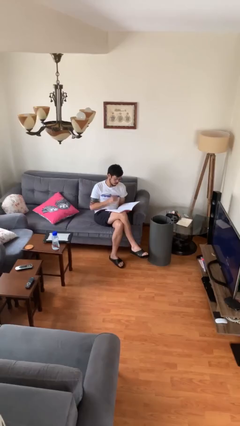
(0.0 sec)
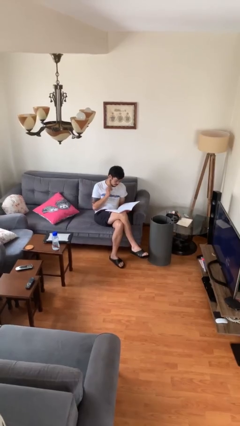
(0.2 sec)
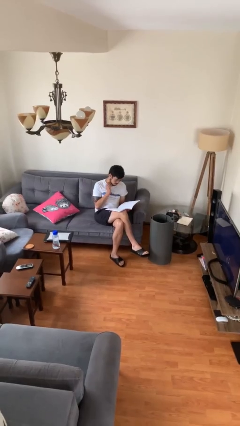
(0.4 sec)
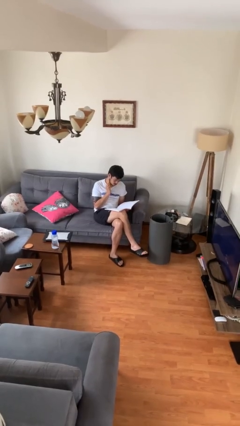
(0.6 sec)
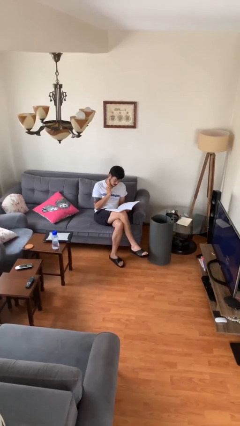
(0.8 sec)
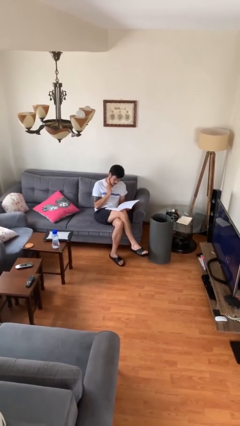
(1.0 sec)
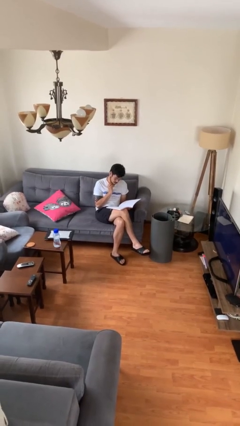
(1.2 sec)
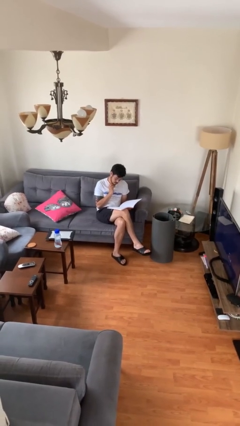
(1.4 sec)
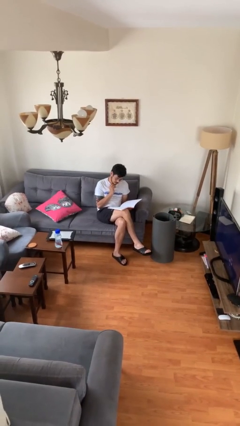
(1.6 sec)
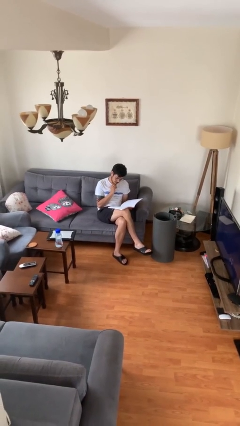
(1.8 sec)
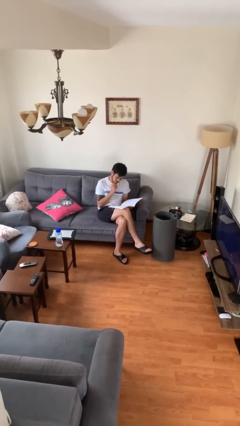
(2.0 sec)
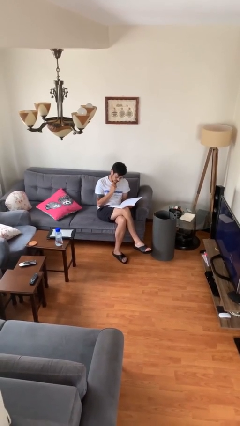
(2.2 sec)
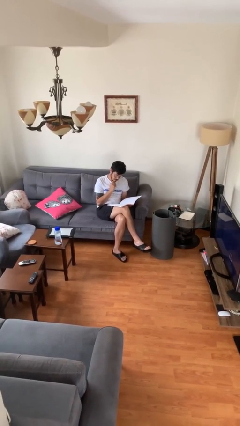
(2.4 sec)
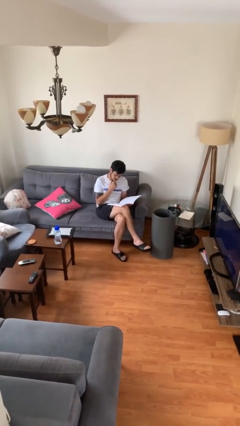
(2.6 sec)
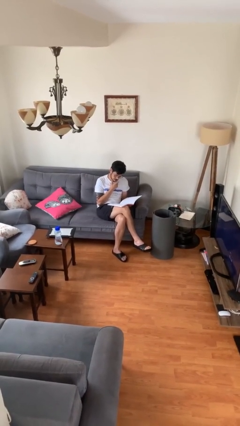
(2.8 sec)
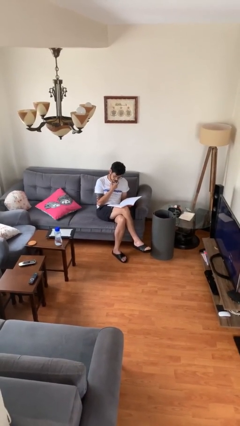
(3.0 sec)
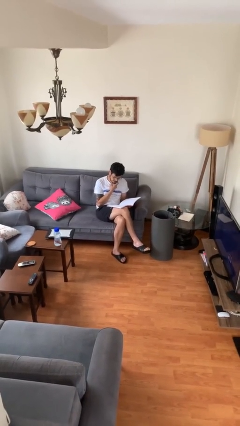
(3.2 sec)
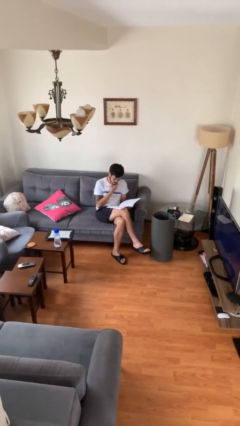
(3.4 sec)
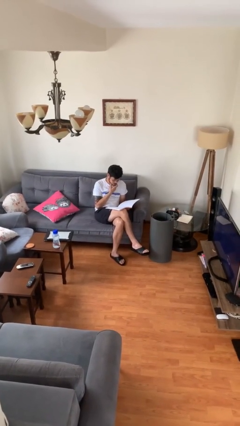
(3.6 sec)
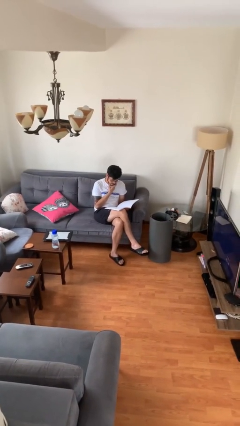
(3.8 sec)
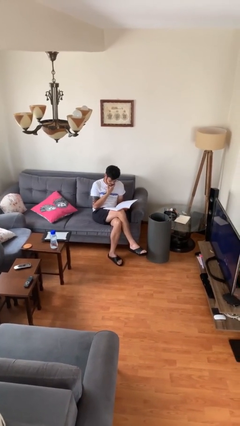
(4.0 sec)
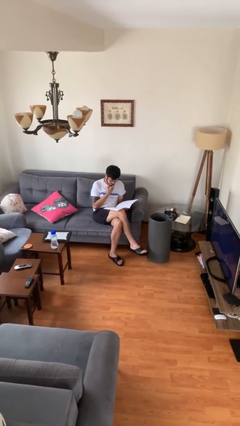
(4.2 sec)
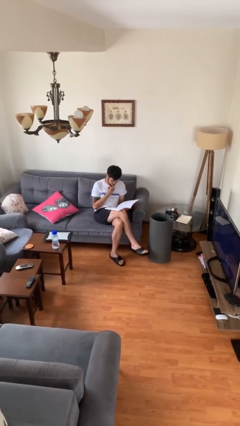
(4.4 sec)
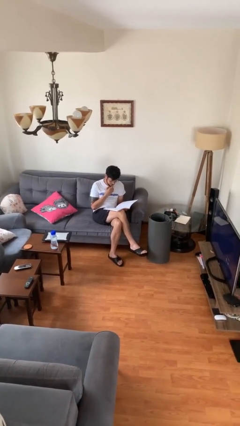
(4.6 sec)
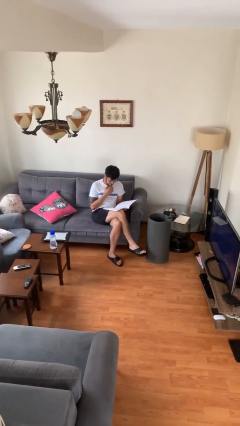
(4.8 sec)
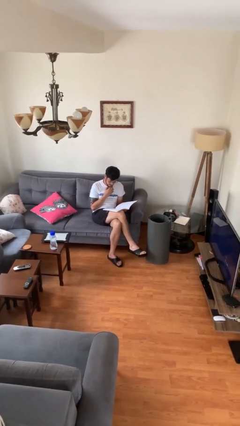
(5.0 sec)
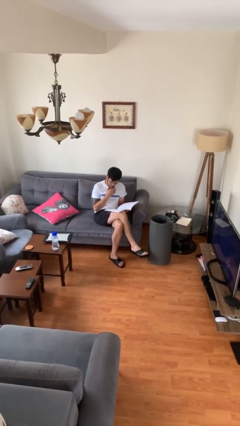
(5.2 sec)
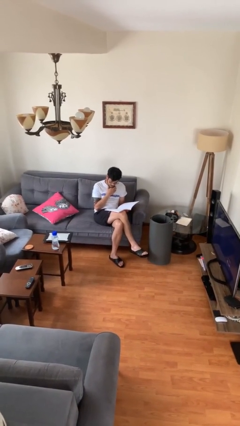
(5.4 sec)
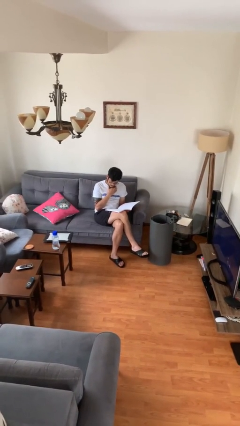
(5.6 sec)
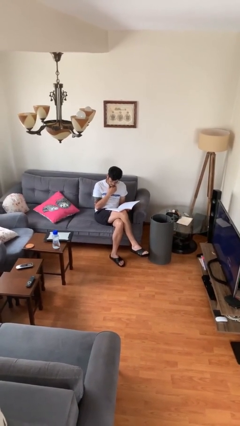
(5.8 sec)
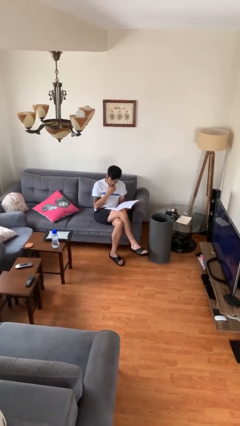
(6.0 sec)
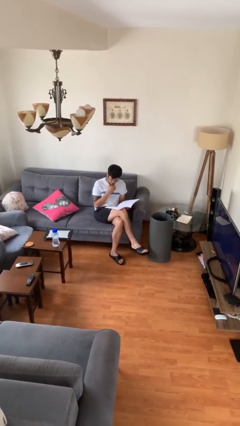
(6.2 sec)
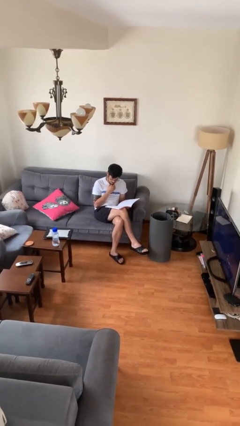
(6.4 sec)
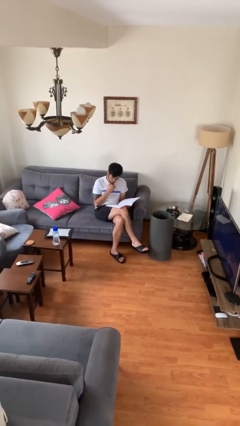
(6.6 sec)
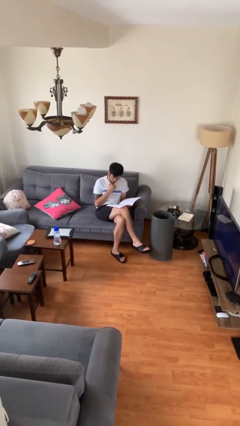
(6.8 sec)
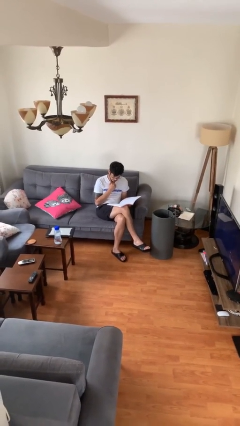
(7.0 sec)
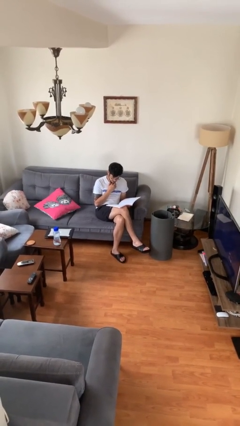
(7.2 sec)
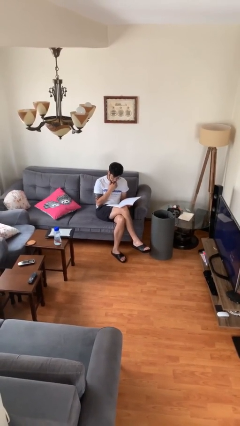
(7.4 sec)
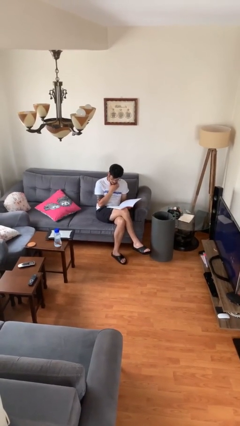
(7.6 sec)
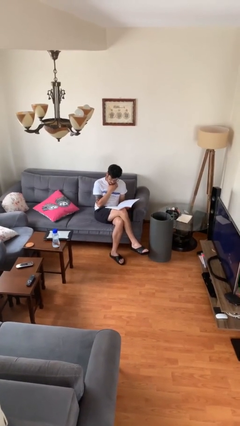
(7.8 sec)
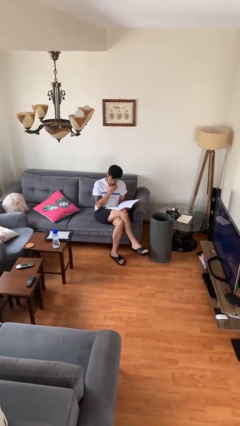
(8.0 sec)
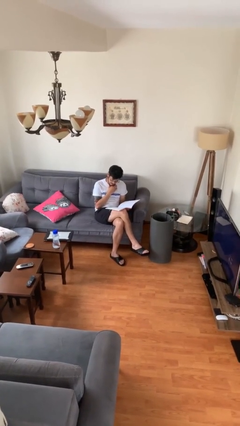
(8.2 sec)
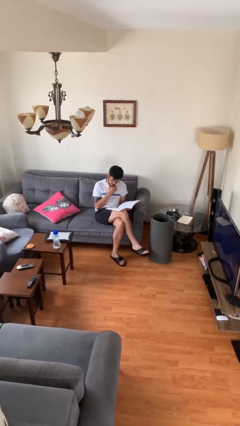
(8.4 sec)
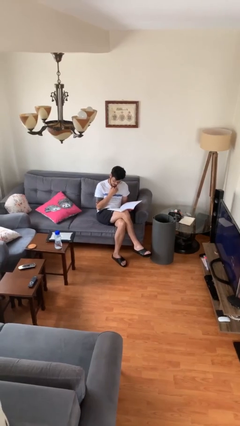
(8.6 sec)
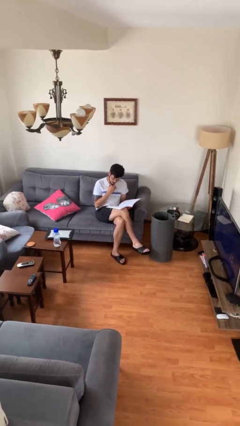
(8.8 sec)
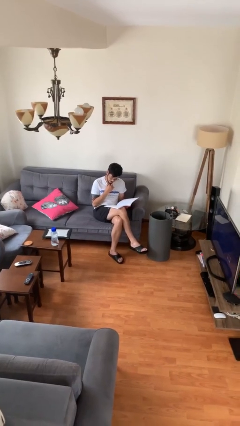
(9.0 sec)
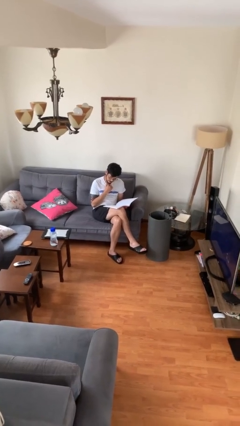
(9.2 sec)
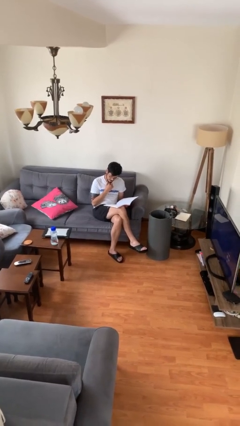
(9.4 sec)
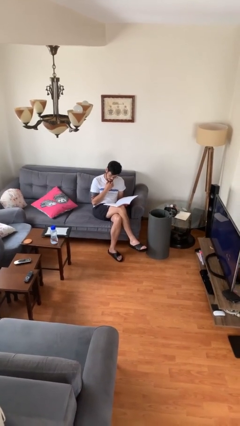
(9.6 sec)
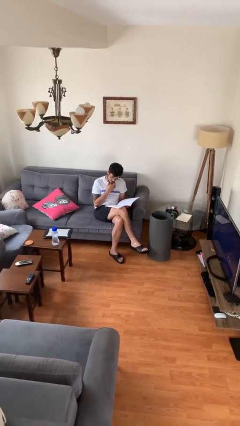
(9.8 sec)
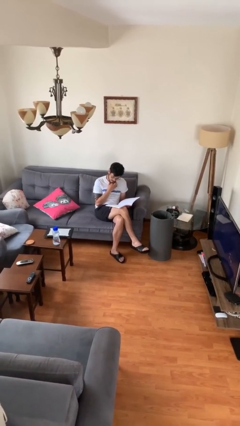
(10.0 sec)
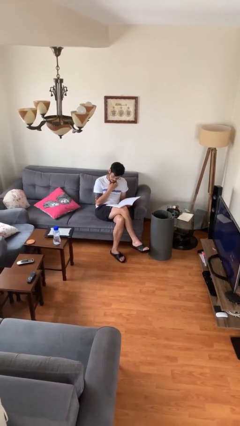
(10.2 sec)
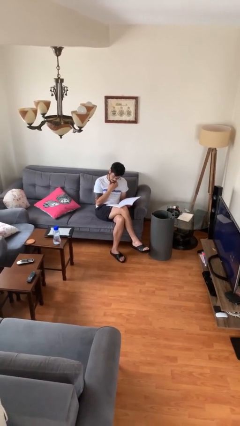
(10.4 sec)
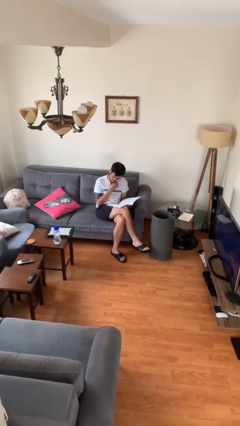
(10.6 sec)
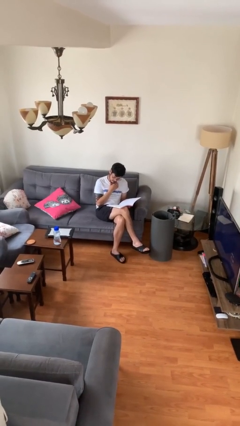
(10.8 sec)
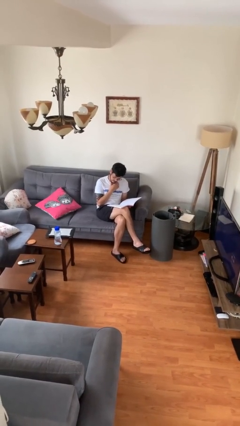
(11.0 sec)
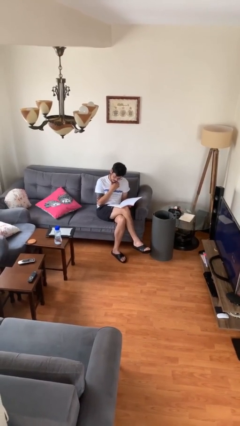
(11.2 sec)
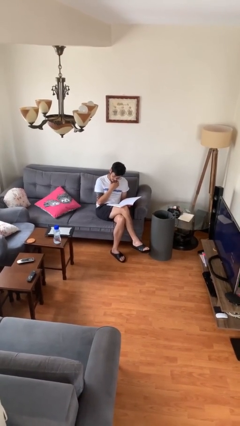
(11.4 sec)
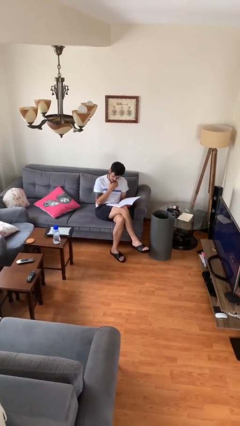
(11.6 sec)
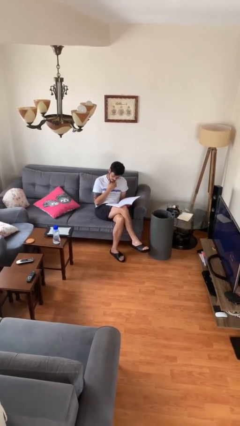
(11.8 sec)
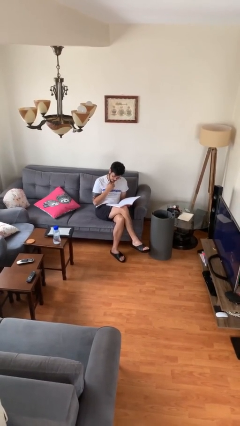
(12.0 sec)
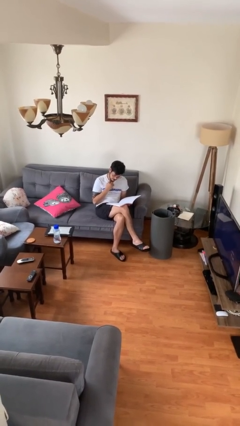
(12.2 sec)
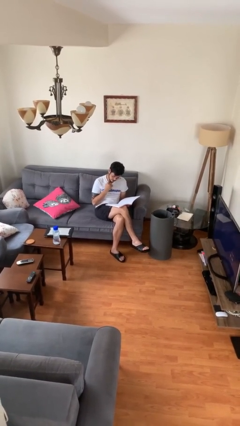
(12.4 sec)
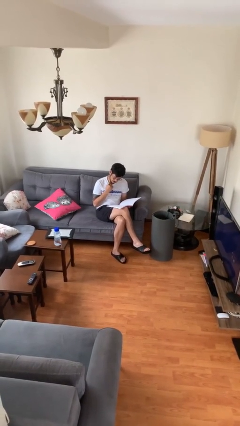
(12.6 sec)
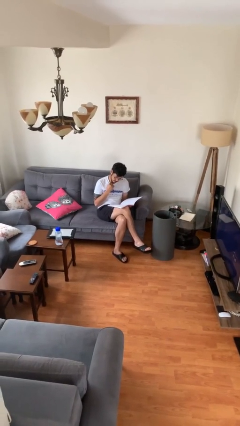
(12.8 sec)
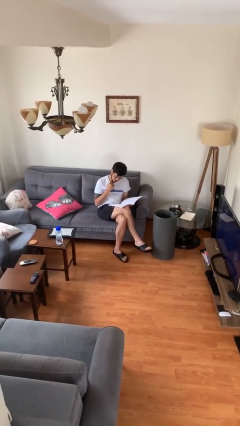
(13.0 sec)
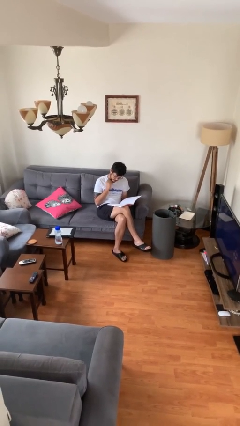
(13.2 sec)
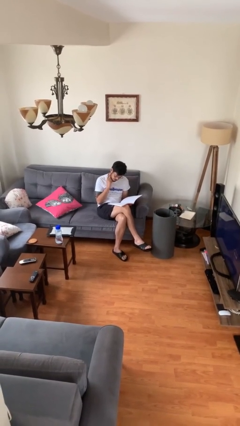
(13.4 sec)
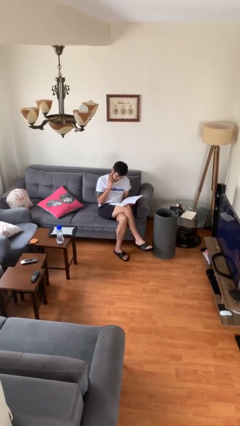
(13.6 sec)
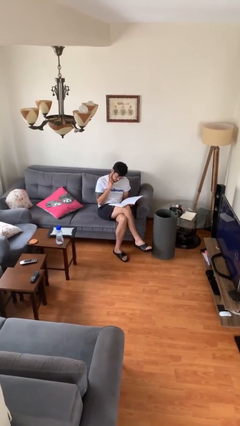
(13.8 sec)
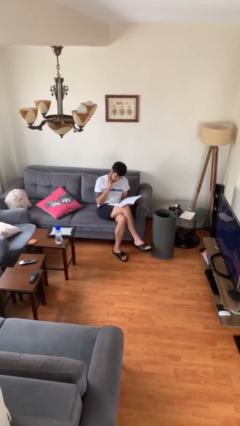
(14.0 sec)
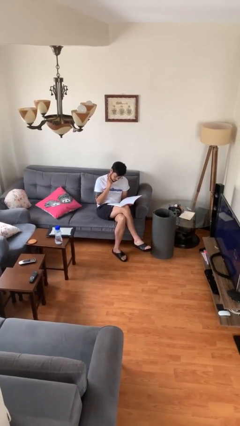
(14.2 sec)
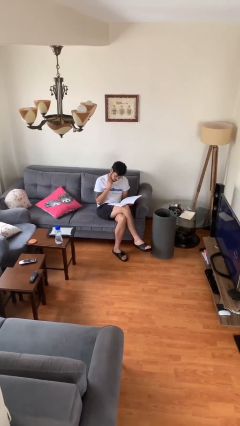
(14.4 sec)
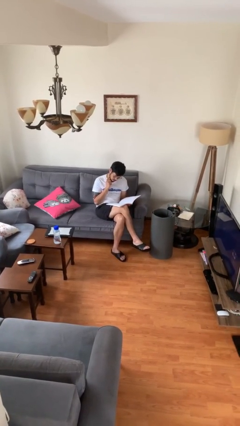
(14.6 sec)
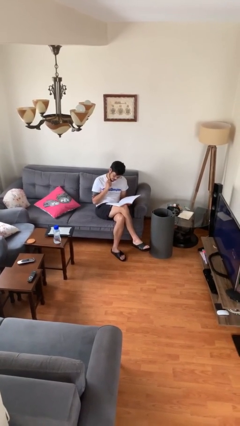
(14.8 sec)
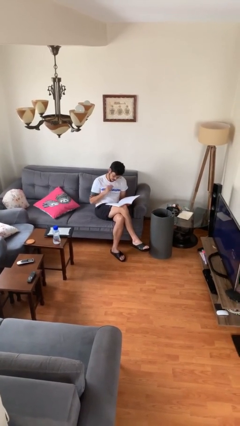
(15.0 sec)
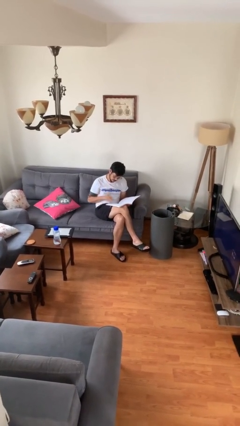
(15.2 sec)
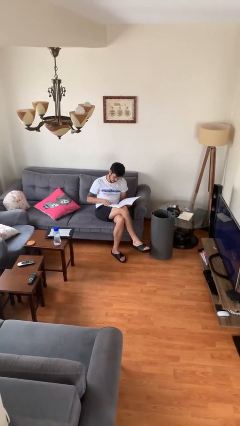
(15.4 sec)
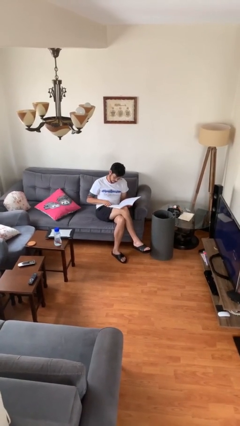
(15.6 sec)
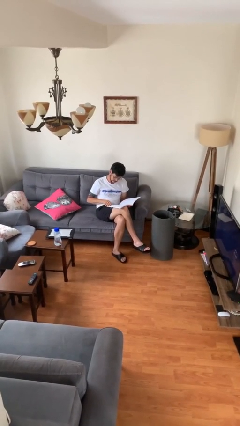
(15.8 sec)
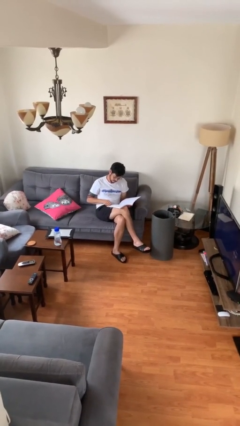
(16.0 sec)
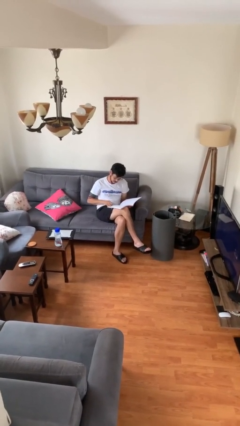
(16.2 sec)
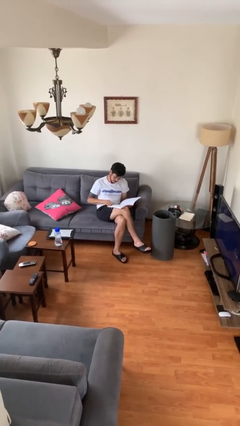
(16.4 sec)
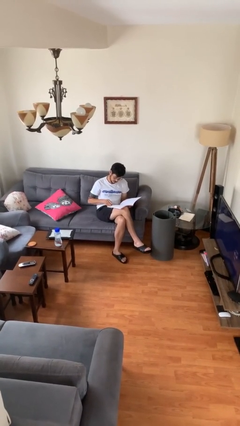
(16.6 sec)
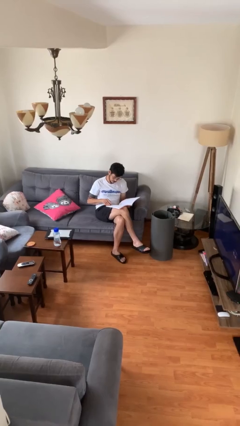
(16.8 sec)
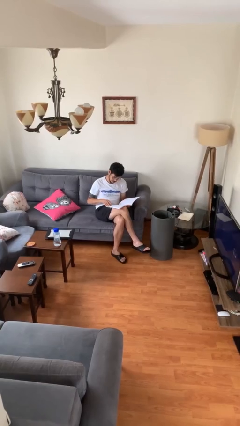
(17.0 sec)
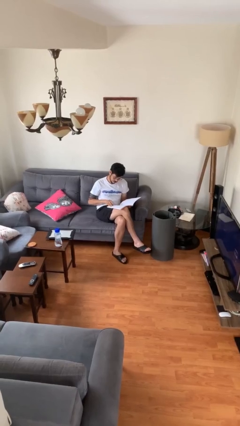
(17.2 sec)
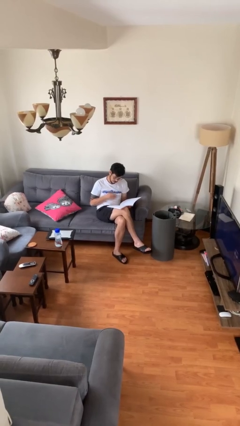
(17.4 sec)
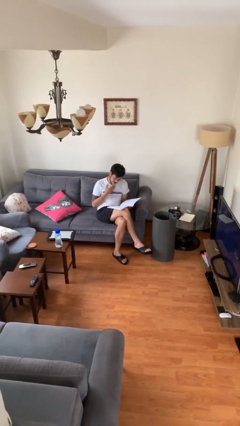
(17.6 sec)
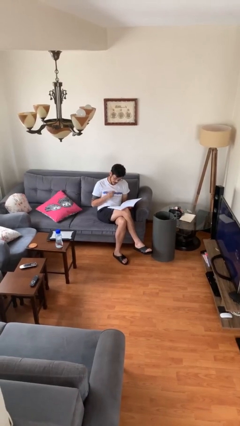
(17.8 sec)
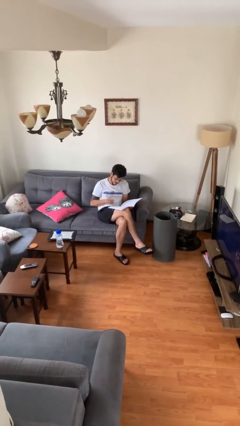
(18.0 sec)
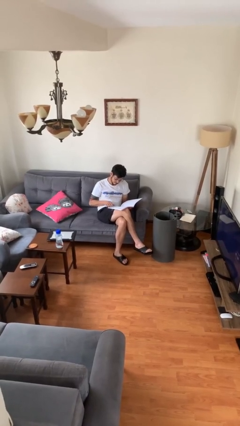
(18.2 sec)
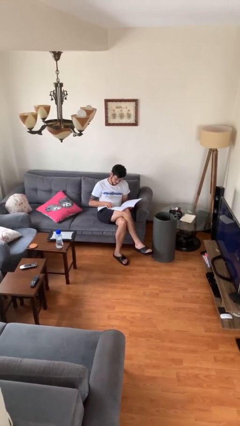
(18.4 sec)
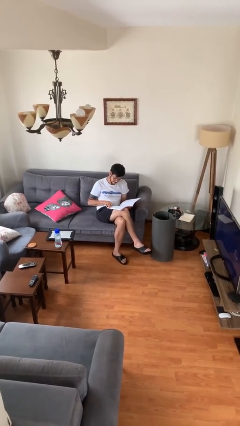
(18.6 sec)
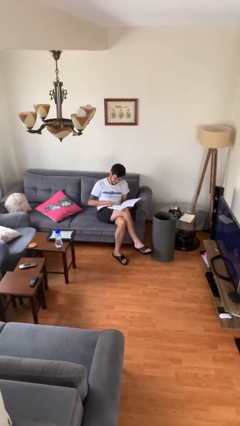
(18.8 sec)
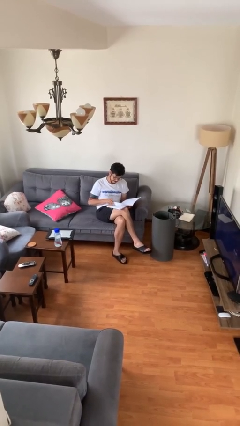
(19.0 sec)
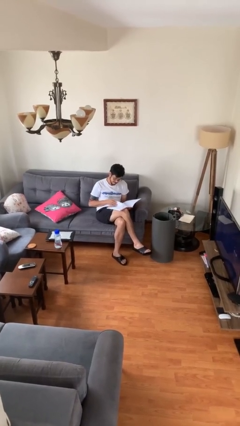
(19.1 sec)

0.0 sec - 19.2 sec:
person reads document
